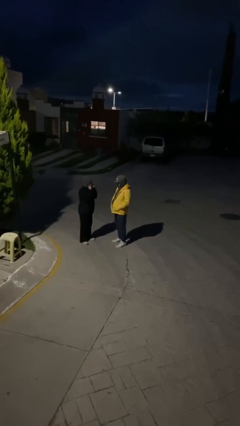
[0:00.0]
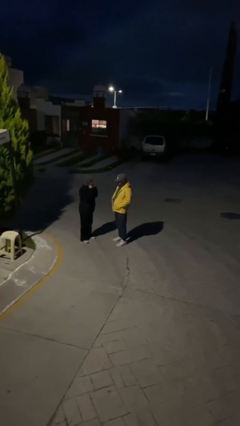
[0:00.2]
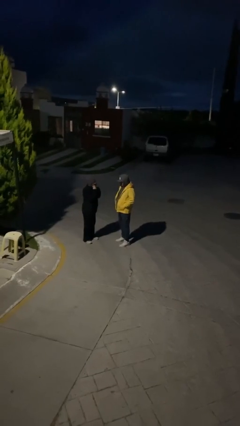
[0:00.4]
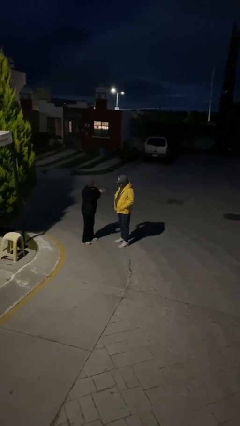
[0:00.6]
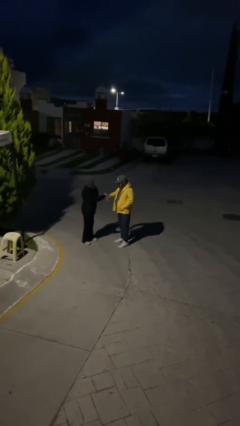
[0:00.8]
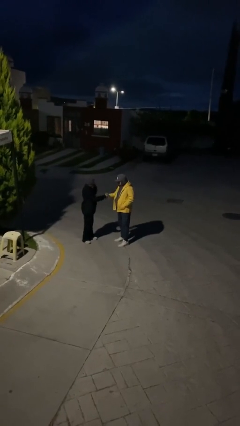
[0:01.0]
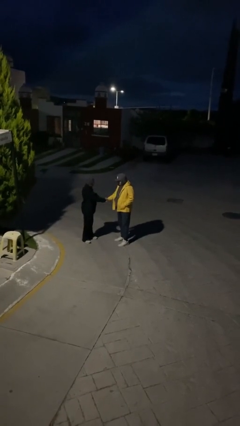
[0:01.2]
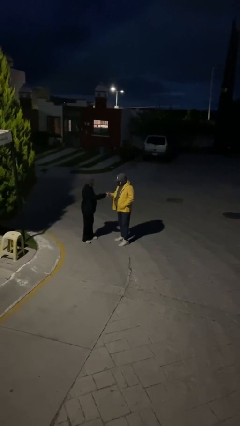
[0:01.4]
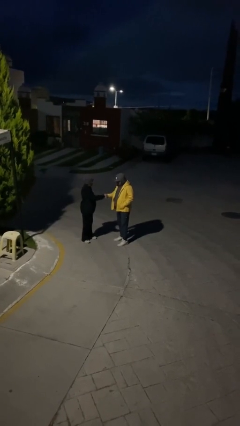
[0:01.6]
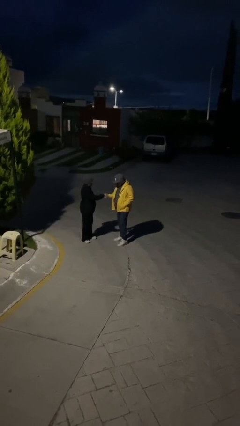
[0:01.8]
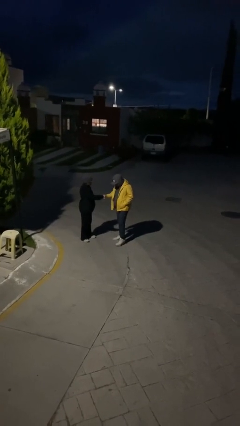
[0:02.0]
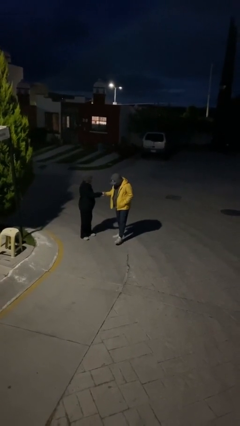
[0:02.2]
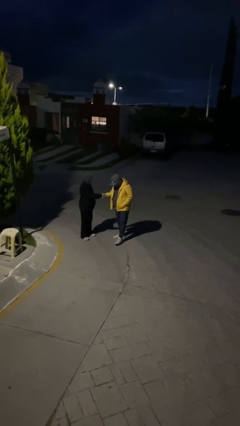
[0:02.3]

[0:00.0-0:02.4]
person shakes hand

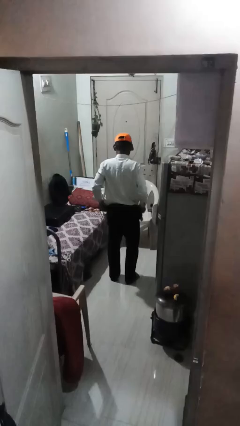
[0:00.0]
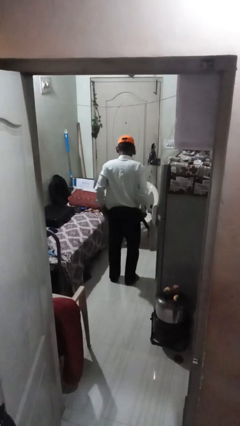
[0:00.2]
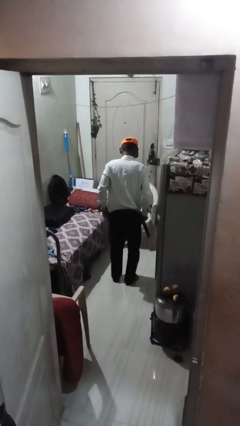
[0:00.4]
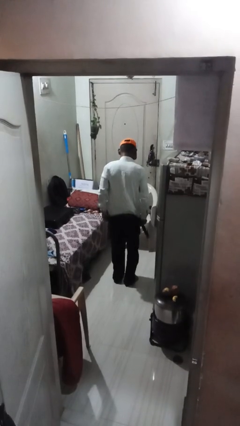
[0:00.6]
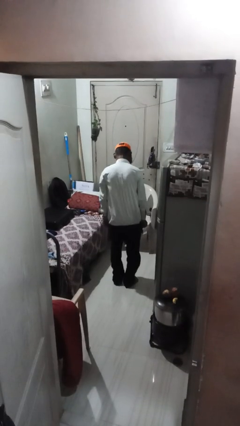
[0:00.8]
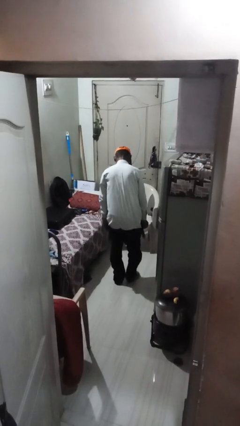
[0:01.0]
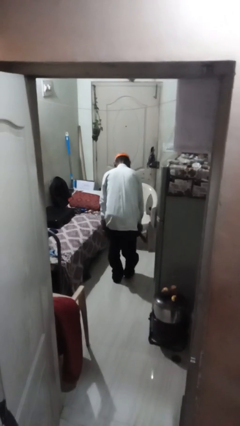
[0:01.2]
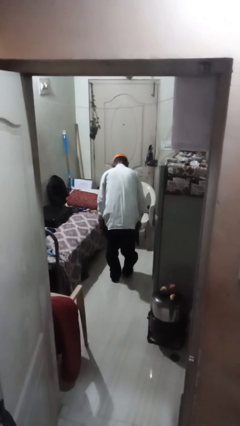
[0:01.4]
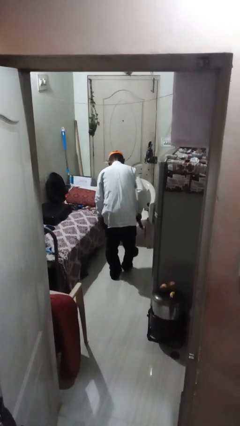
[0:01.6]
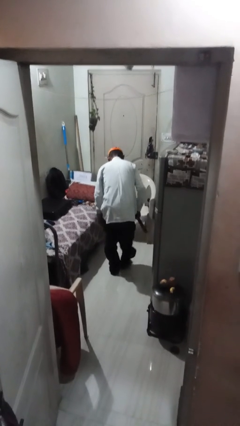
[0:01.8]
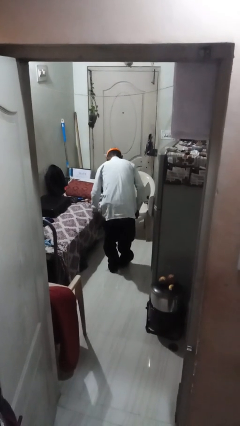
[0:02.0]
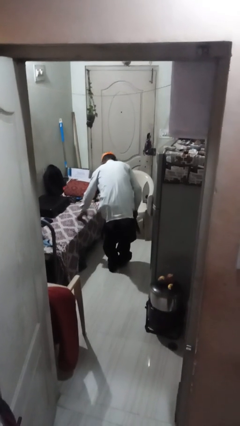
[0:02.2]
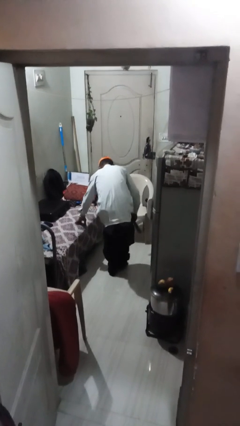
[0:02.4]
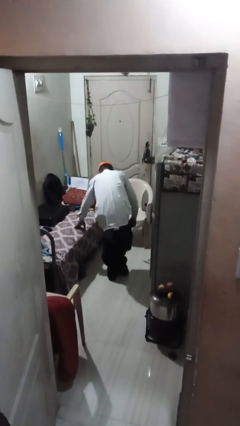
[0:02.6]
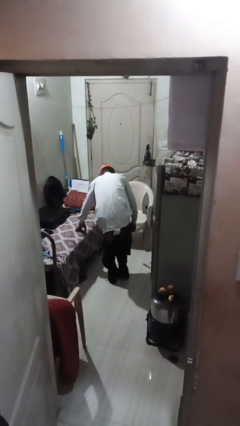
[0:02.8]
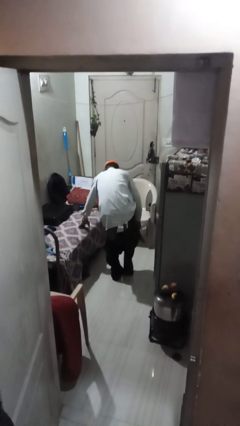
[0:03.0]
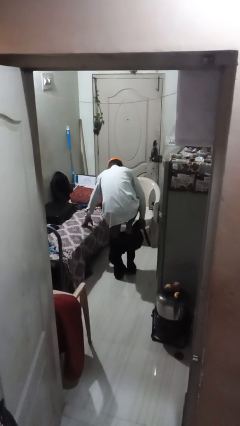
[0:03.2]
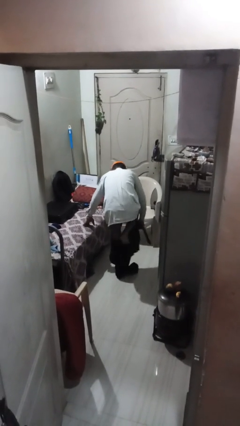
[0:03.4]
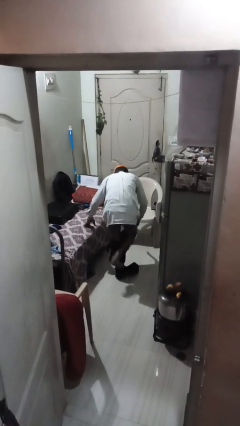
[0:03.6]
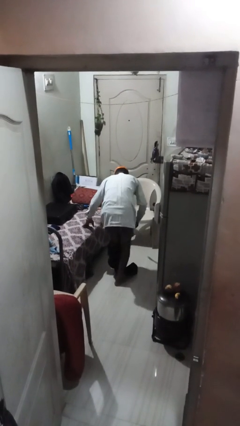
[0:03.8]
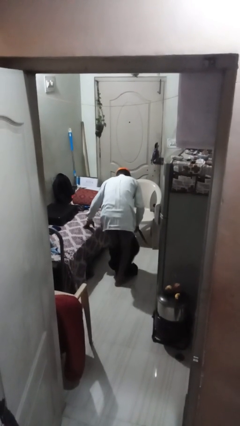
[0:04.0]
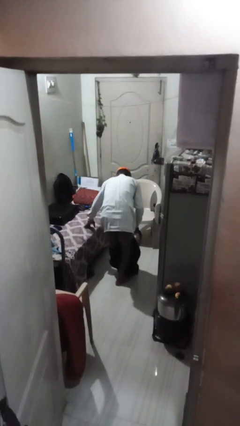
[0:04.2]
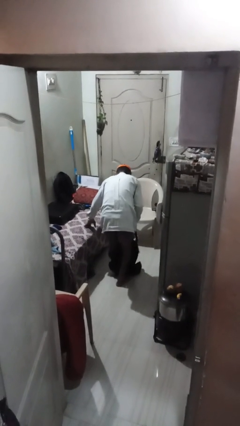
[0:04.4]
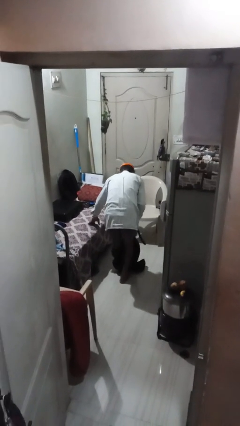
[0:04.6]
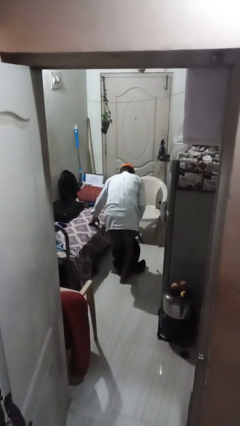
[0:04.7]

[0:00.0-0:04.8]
person takes off pants

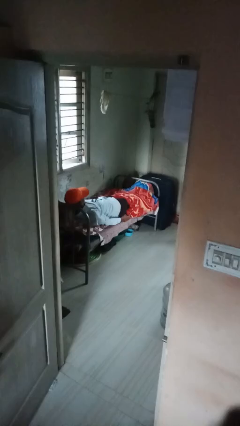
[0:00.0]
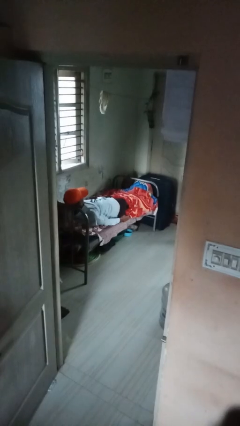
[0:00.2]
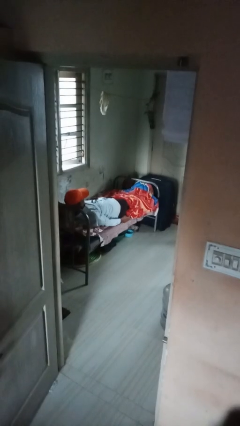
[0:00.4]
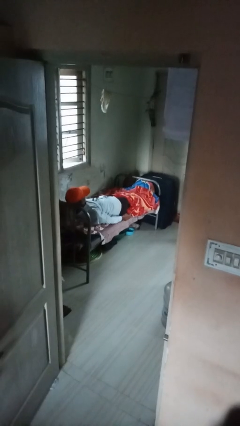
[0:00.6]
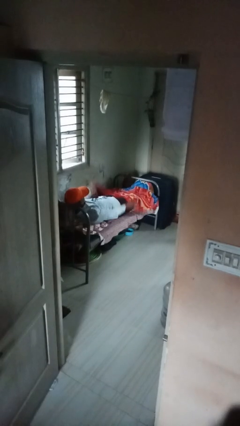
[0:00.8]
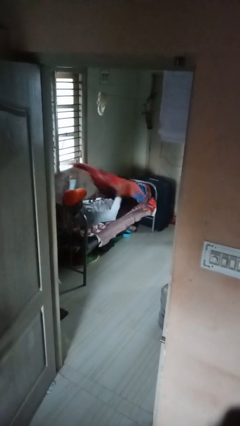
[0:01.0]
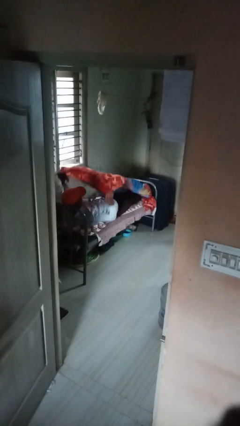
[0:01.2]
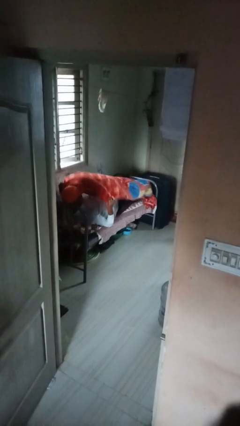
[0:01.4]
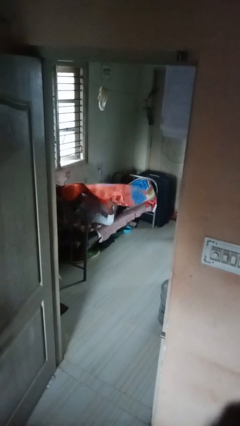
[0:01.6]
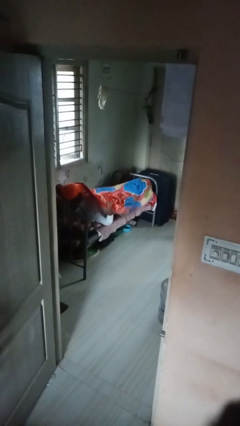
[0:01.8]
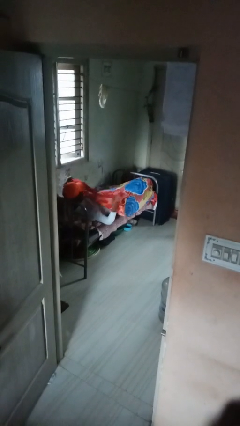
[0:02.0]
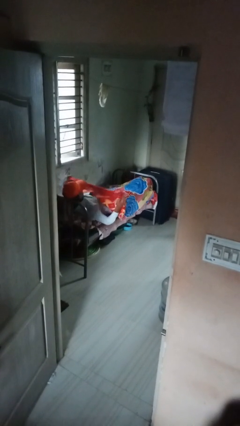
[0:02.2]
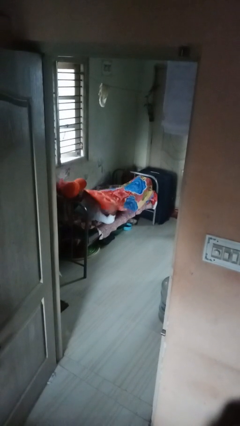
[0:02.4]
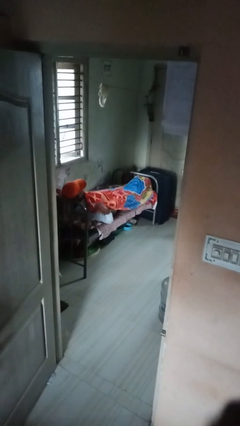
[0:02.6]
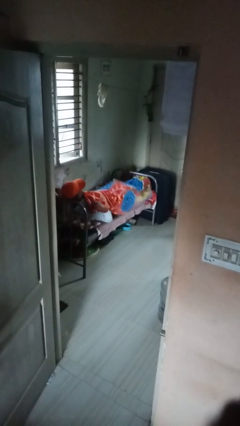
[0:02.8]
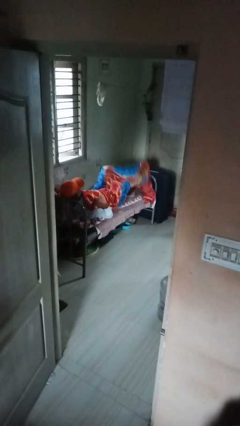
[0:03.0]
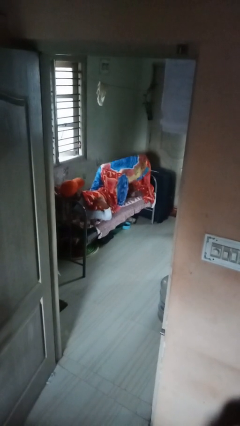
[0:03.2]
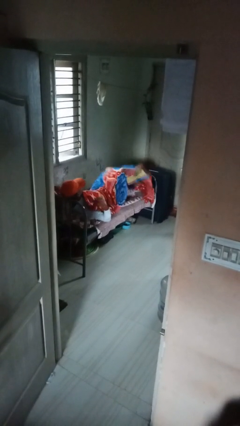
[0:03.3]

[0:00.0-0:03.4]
person covers with bedsheets

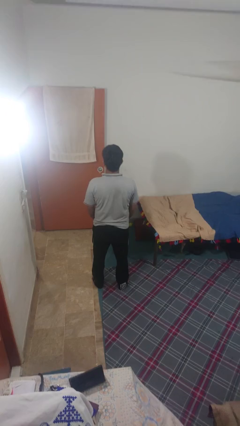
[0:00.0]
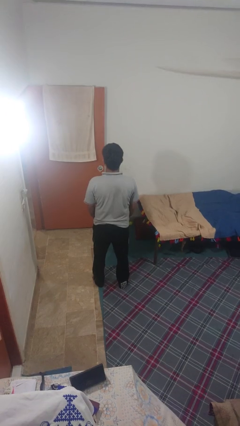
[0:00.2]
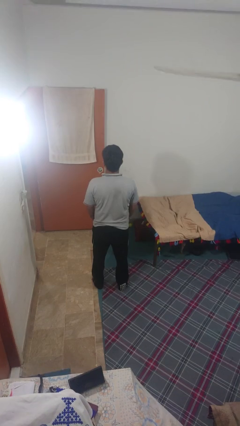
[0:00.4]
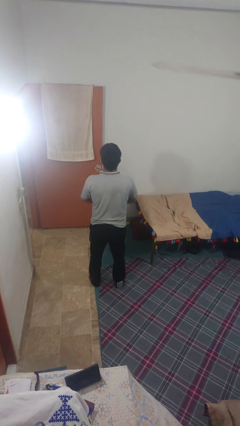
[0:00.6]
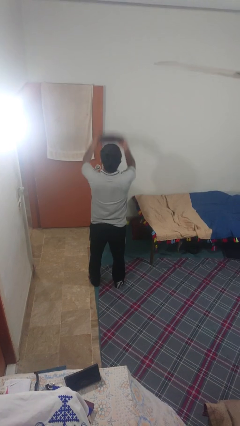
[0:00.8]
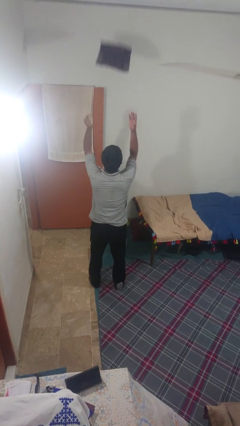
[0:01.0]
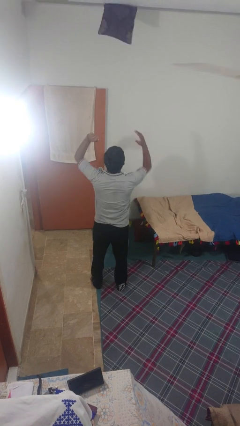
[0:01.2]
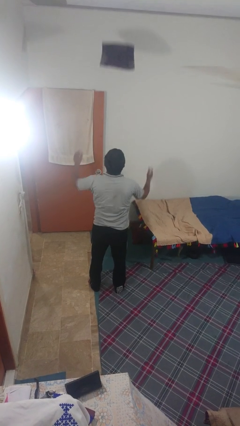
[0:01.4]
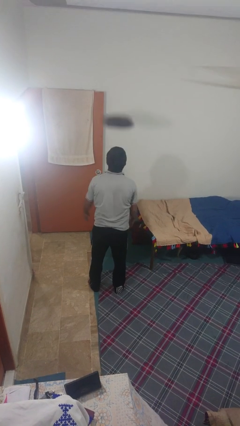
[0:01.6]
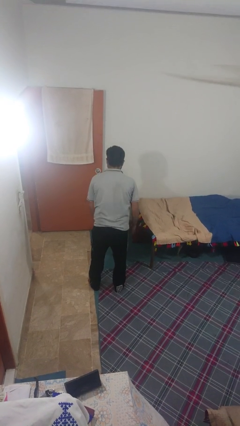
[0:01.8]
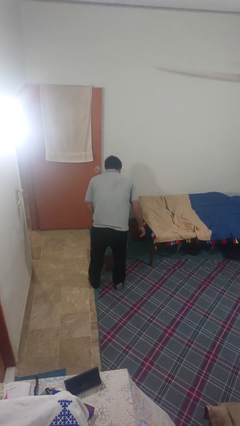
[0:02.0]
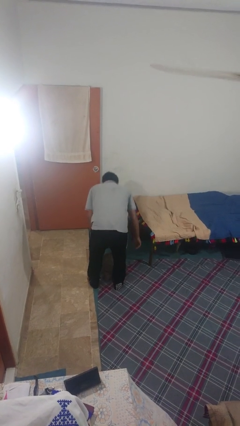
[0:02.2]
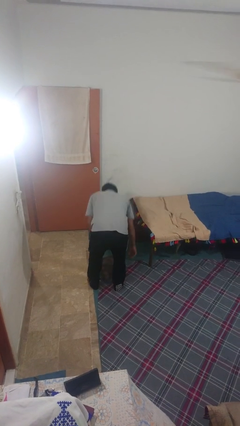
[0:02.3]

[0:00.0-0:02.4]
person throws object into air

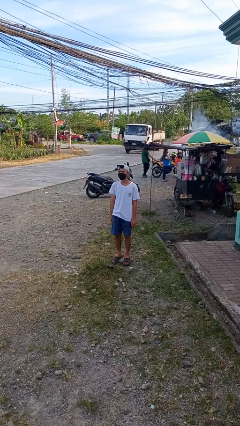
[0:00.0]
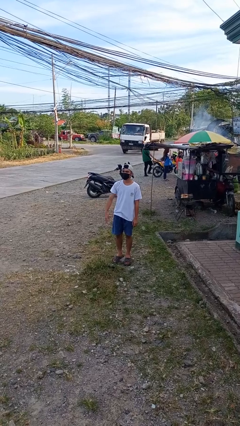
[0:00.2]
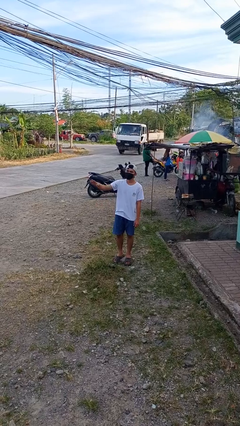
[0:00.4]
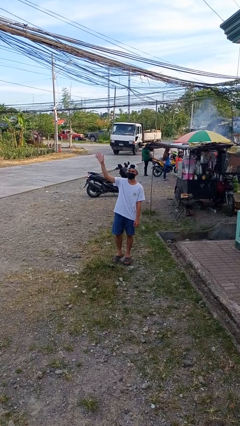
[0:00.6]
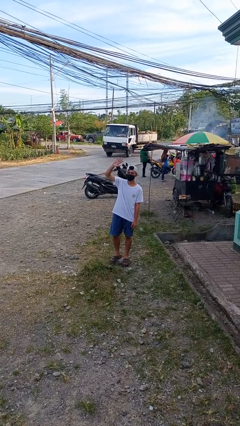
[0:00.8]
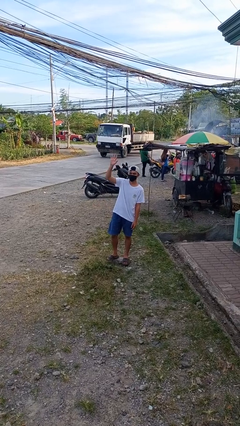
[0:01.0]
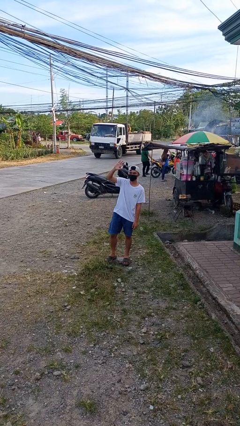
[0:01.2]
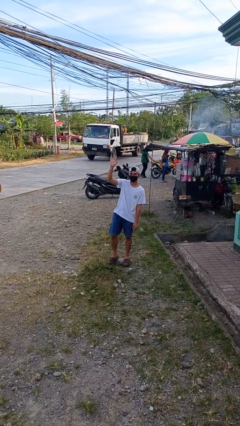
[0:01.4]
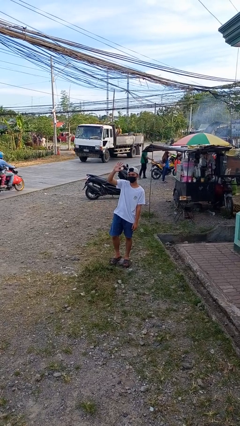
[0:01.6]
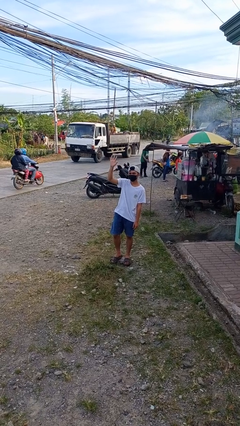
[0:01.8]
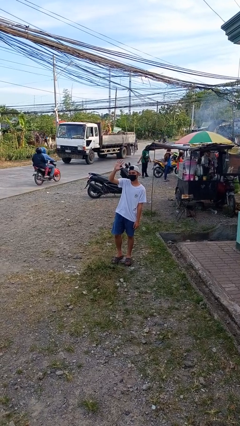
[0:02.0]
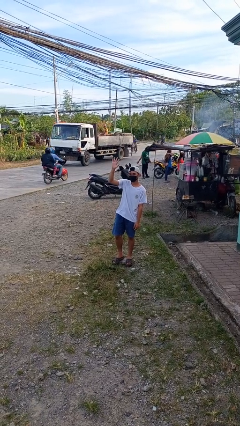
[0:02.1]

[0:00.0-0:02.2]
person waves at person

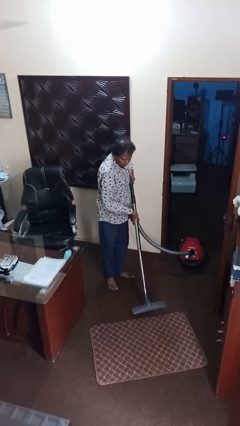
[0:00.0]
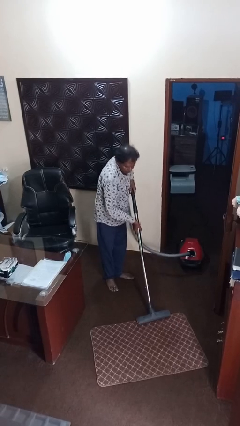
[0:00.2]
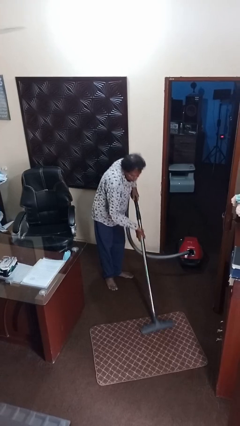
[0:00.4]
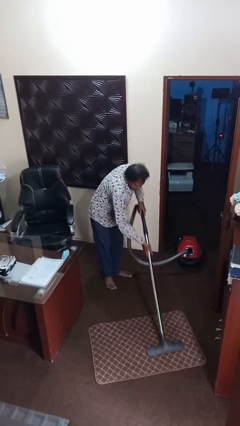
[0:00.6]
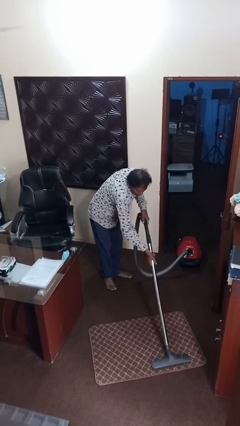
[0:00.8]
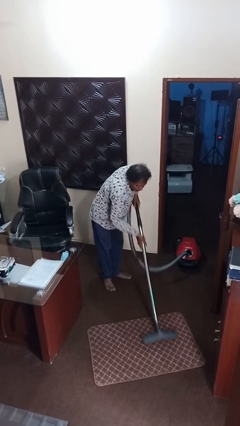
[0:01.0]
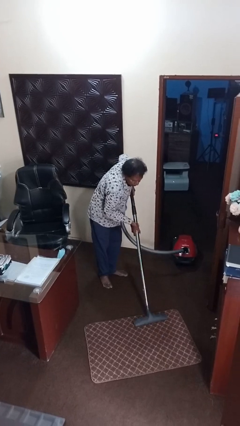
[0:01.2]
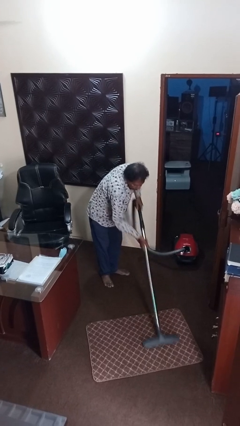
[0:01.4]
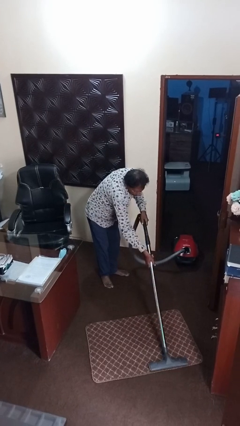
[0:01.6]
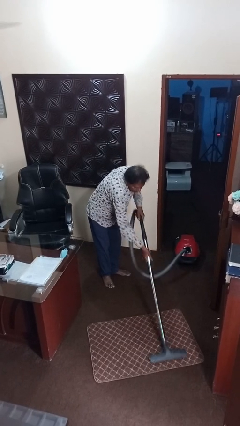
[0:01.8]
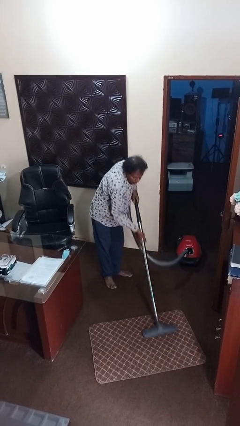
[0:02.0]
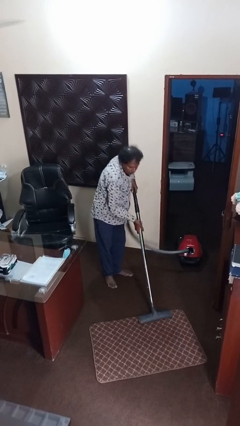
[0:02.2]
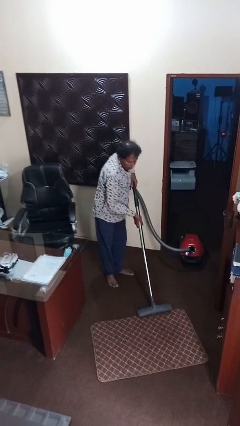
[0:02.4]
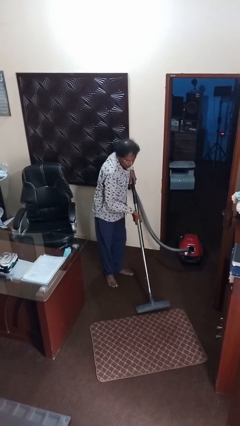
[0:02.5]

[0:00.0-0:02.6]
person vacuums carpet
